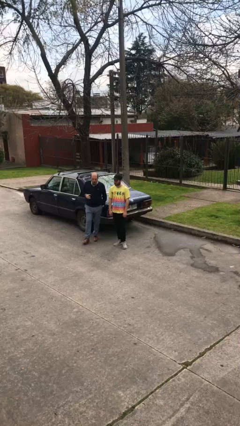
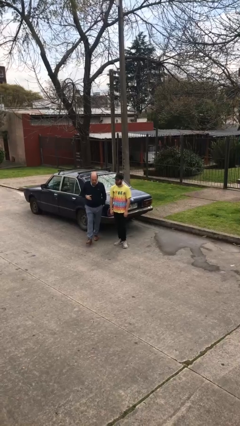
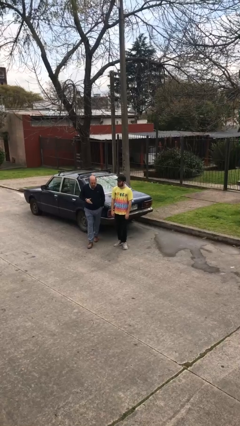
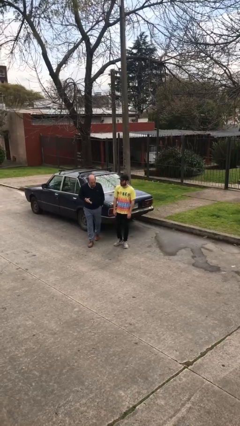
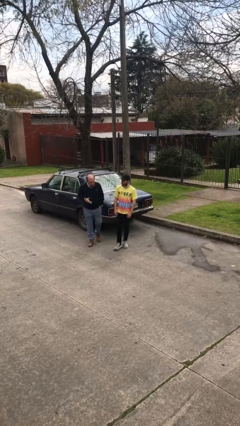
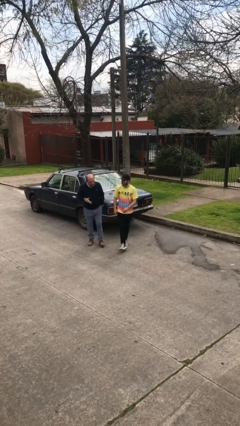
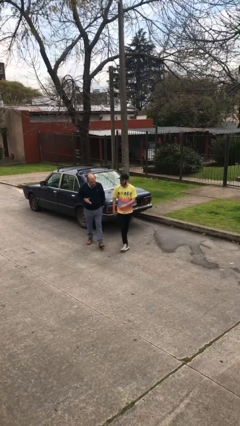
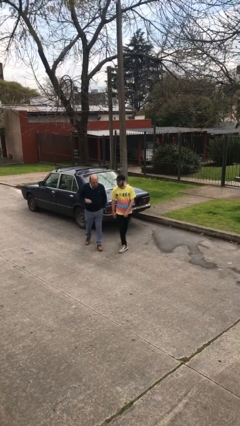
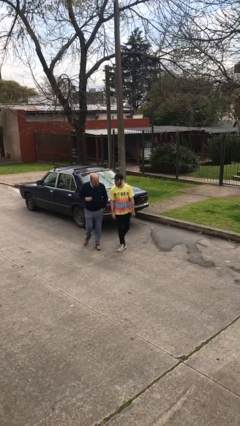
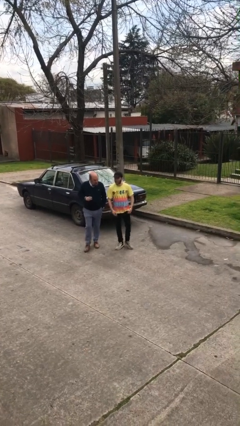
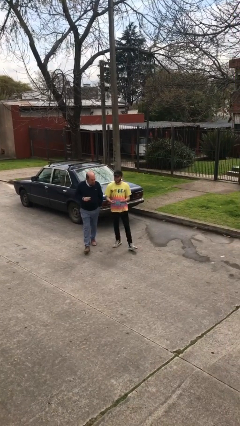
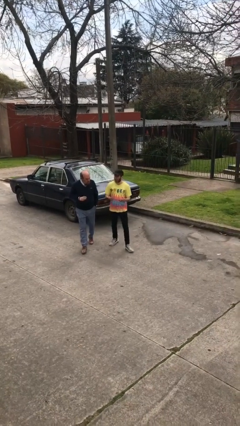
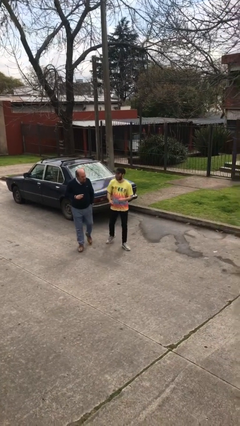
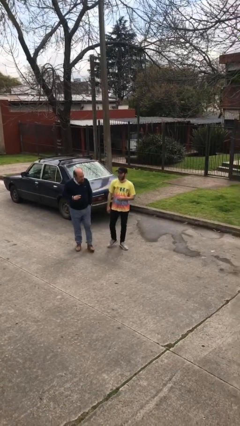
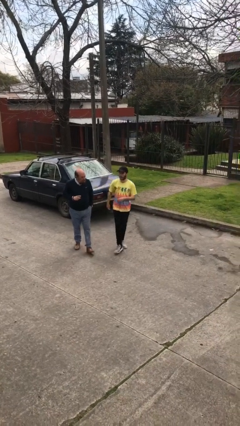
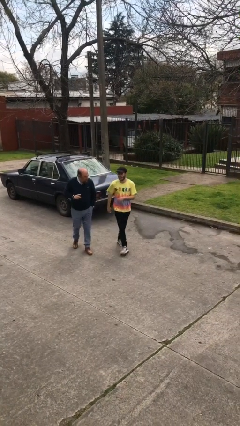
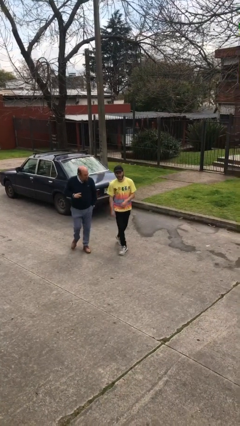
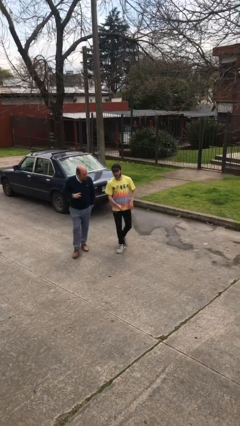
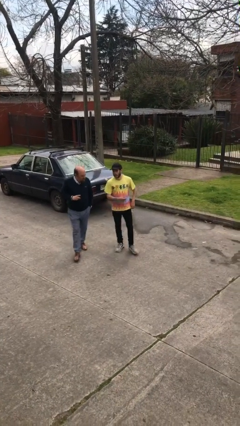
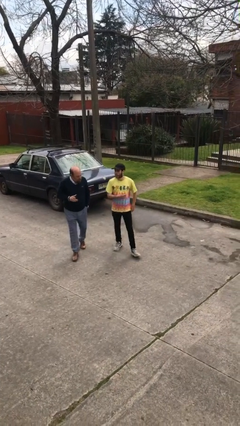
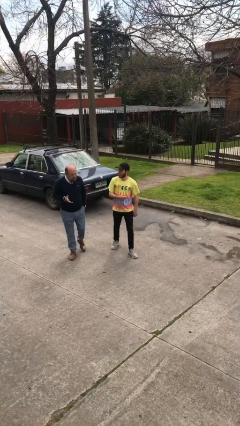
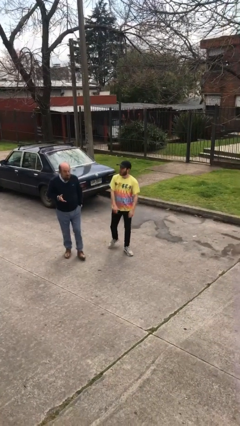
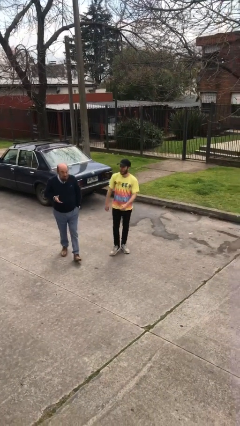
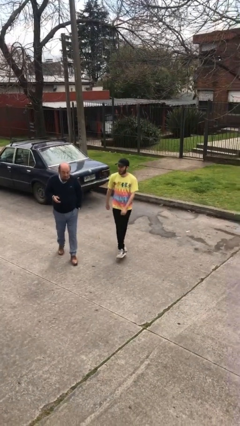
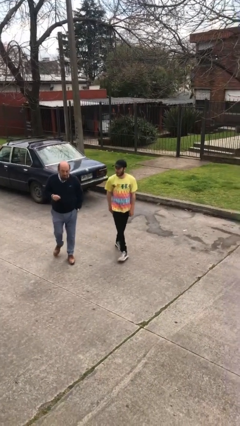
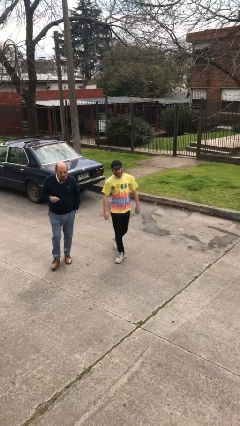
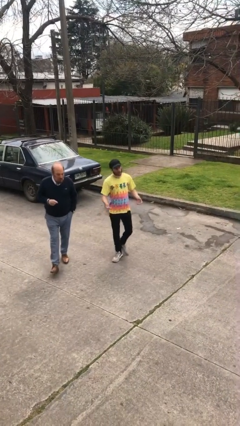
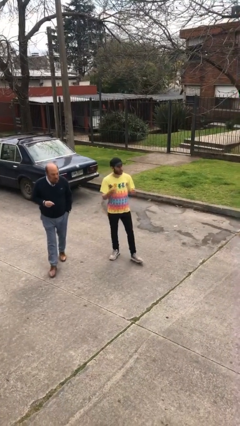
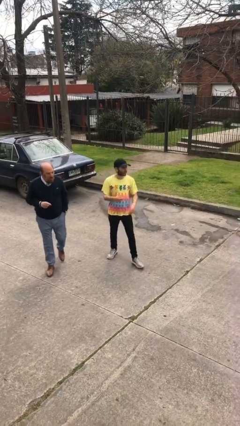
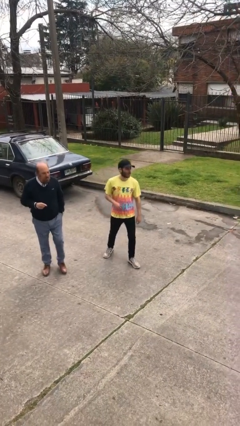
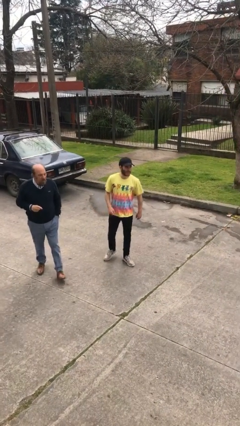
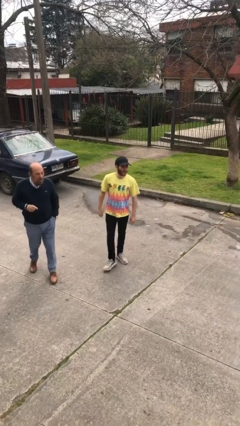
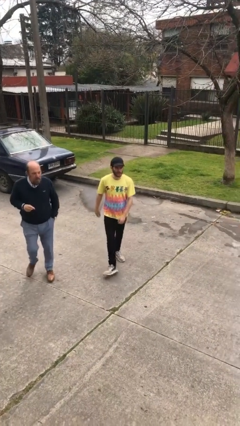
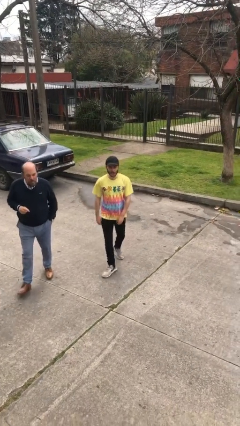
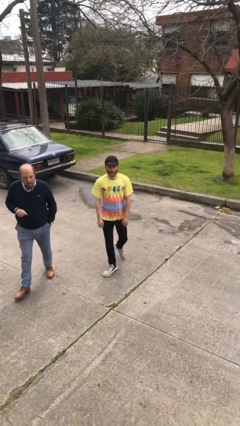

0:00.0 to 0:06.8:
person talks to person

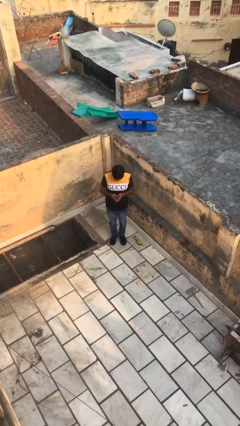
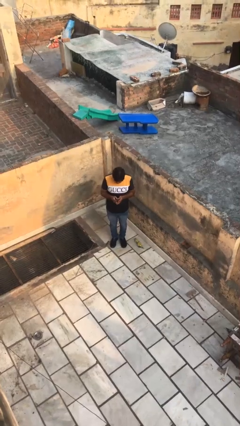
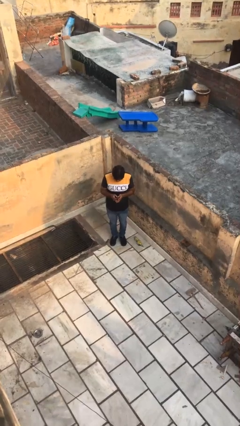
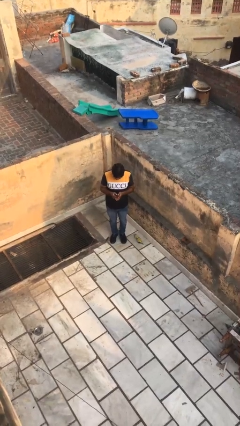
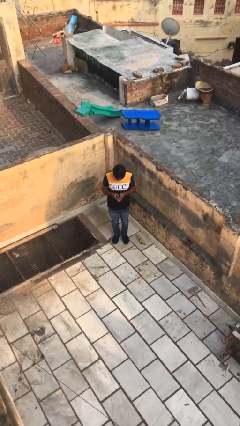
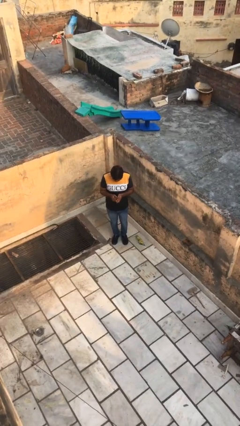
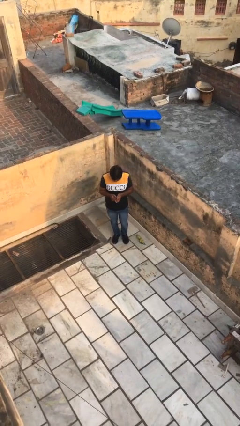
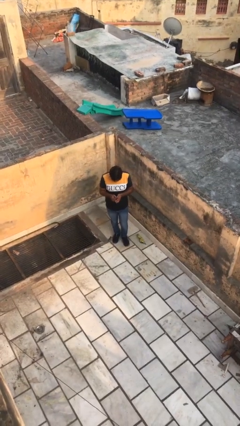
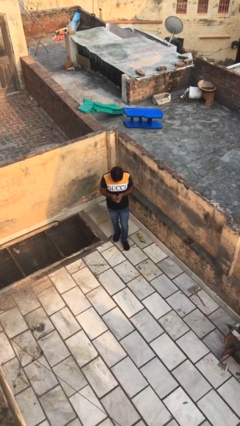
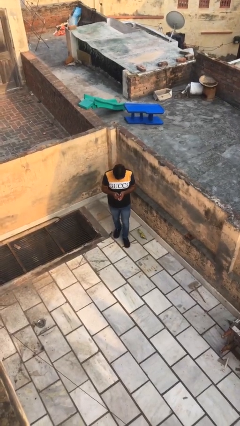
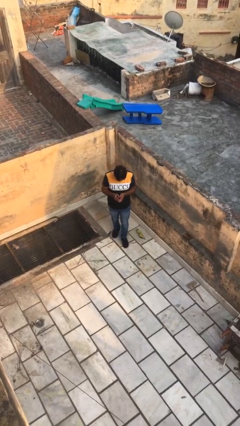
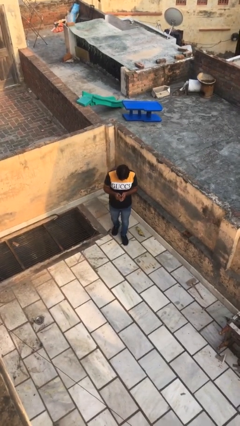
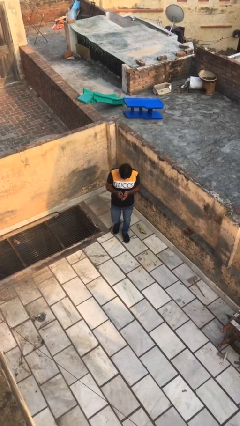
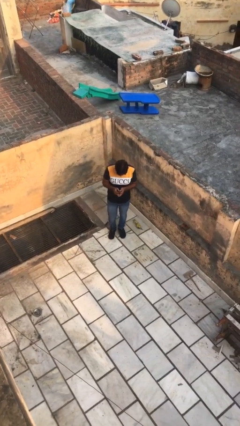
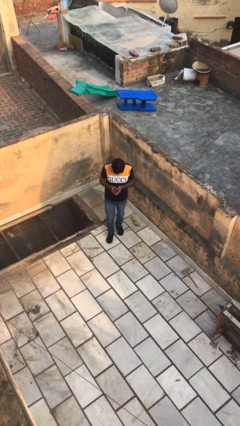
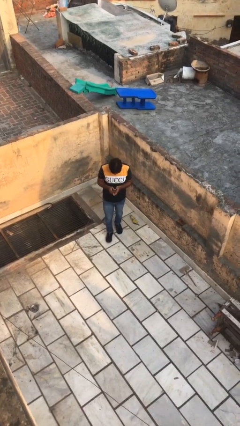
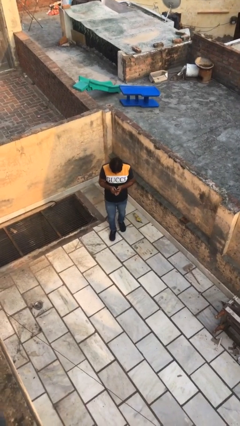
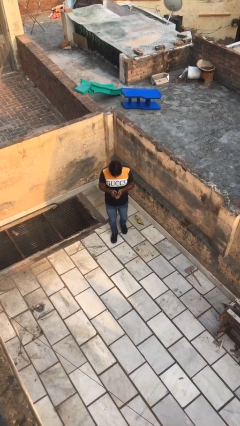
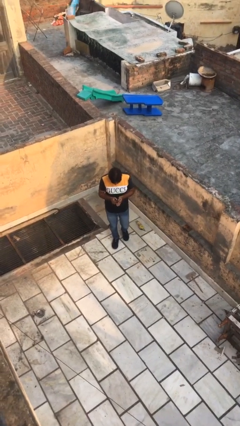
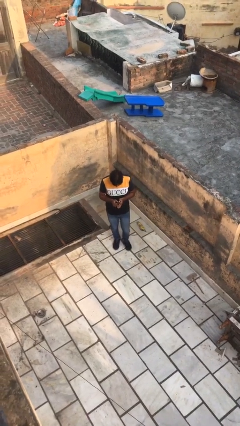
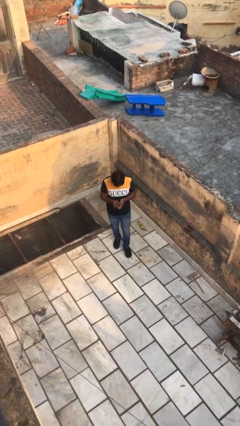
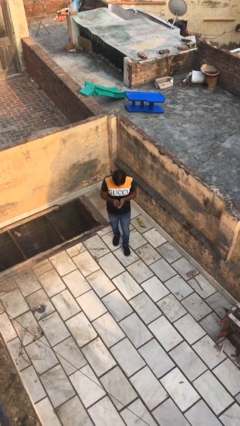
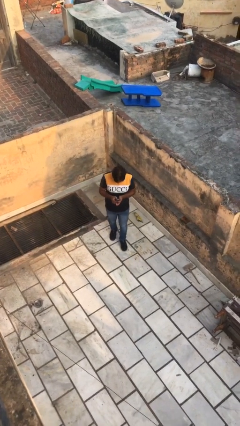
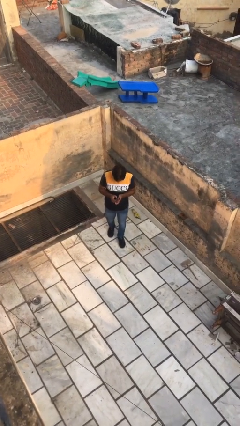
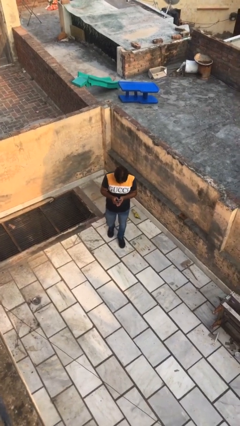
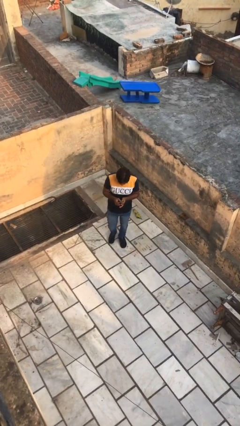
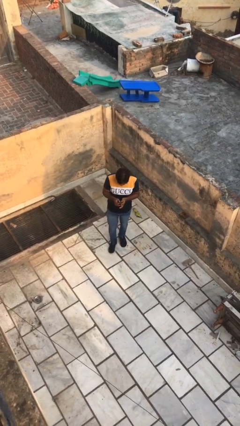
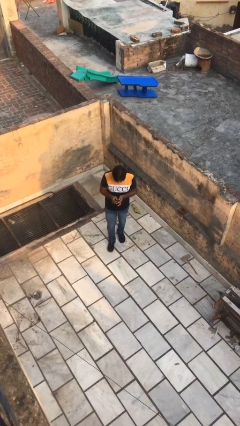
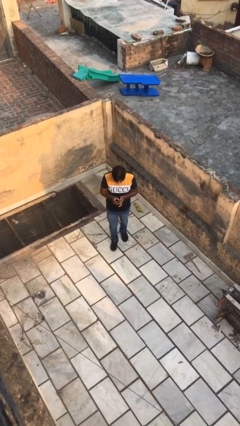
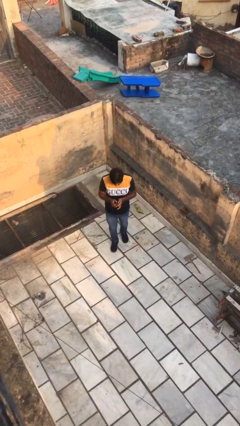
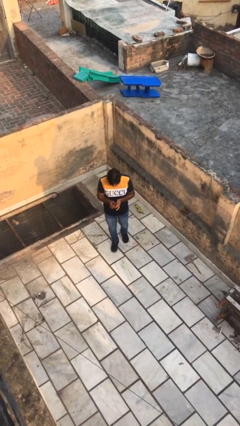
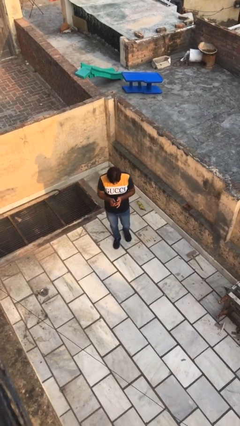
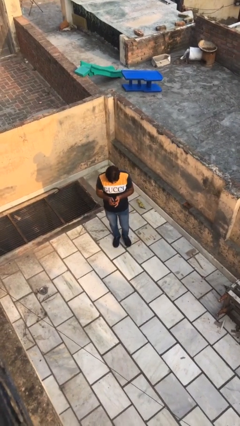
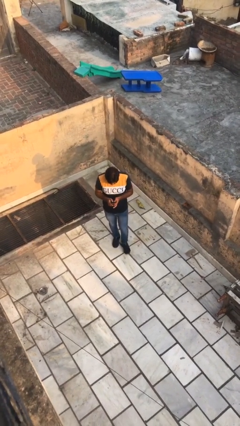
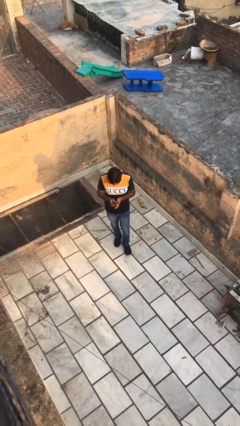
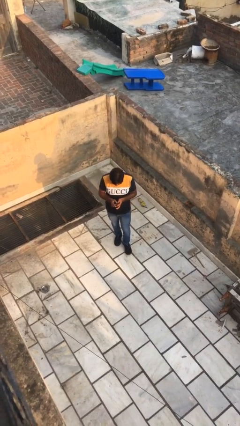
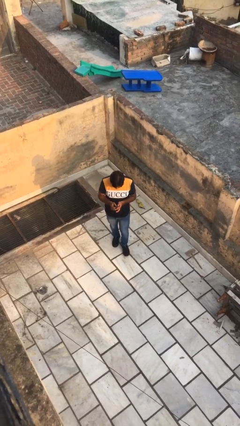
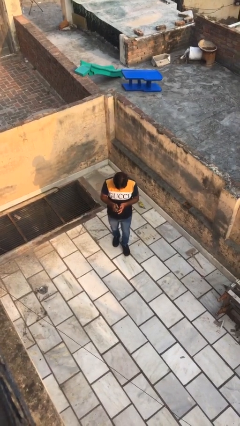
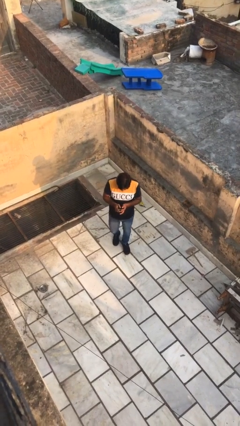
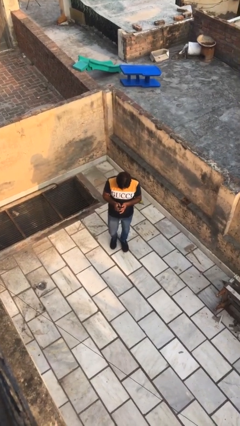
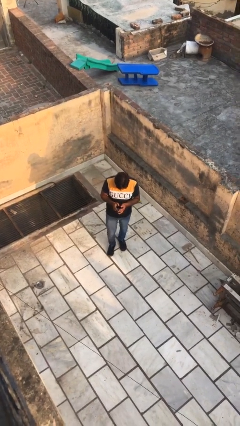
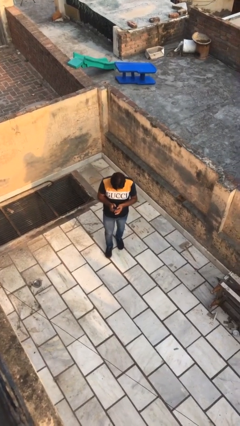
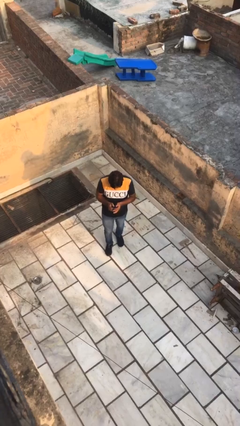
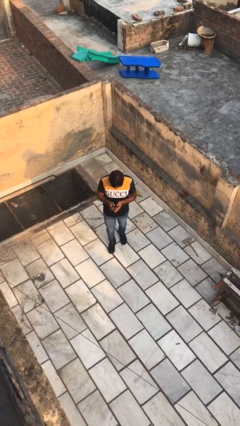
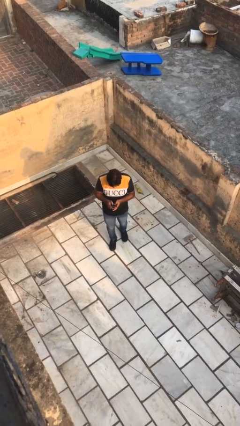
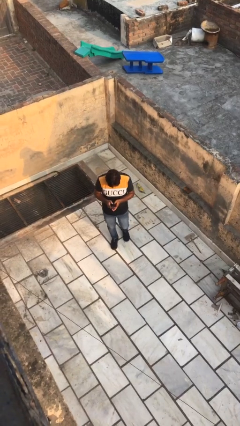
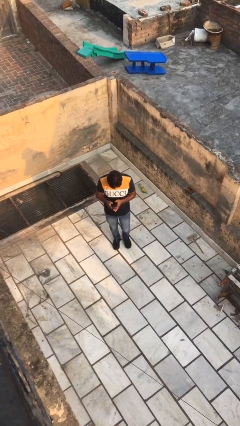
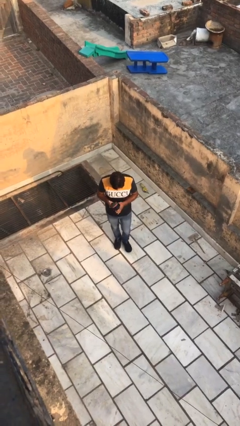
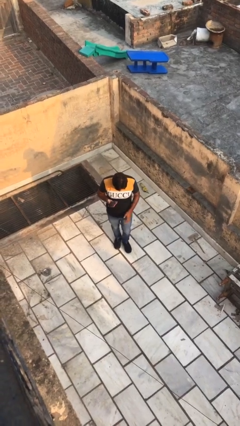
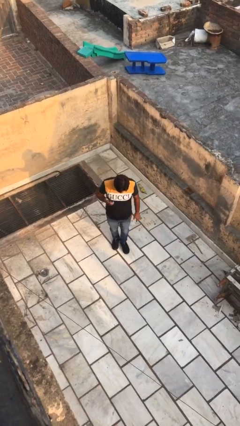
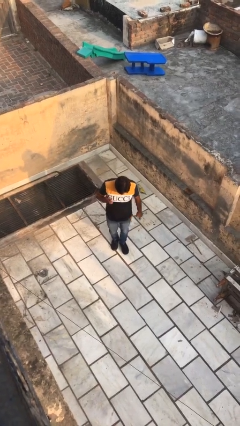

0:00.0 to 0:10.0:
person texts on phone

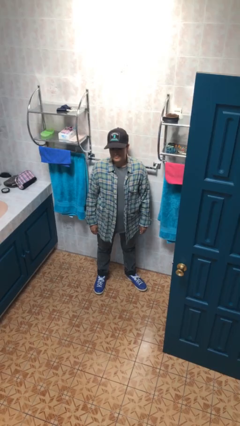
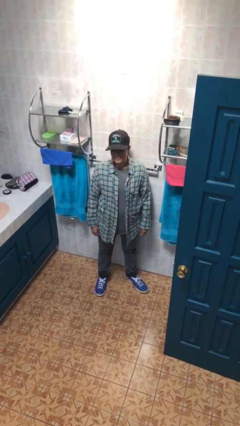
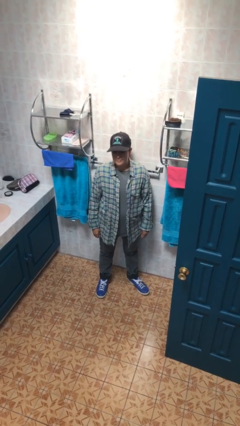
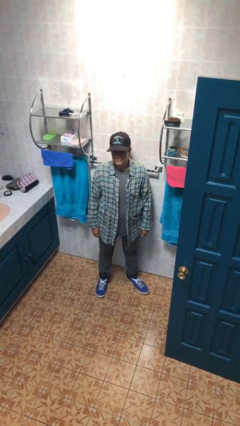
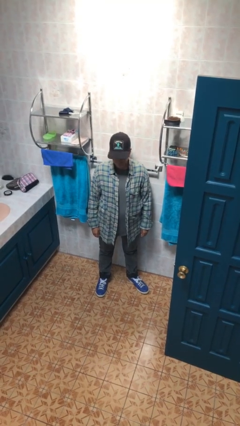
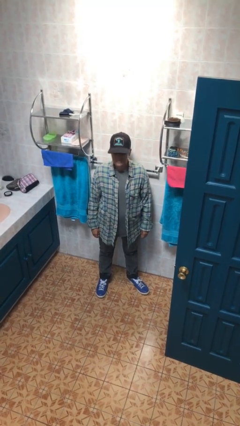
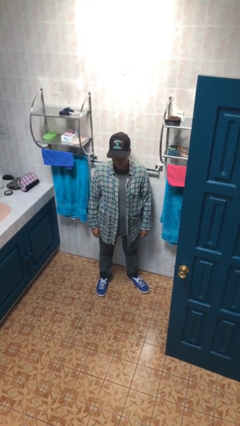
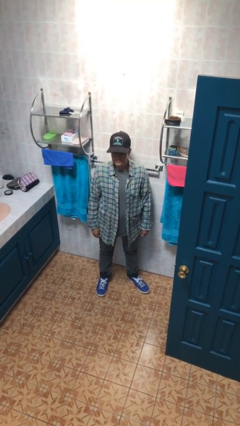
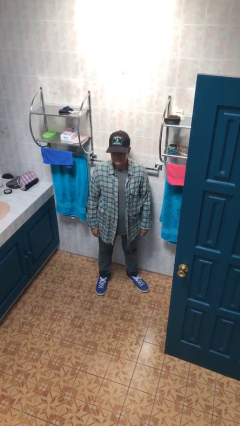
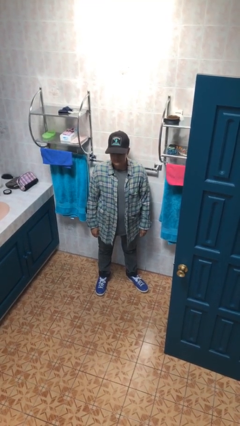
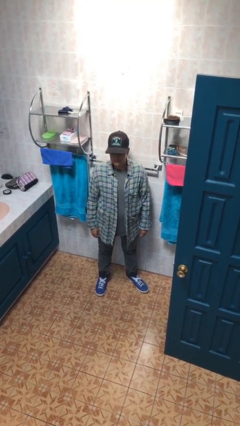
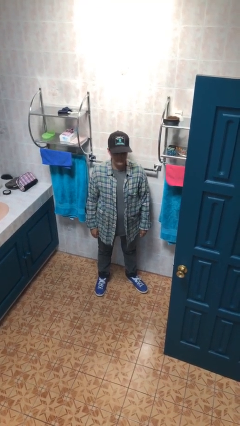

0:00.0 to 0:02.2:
person nods head
